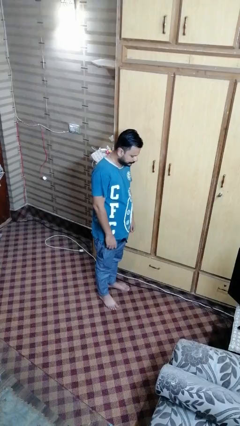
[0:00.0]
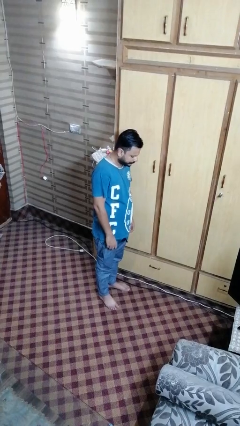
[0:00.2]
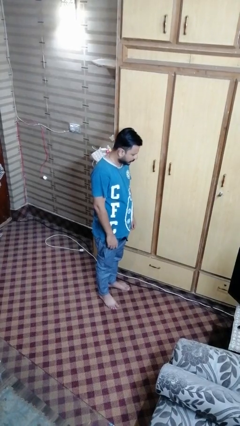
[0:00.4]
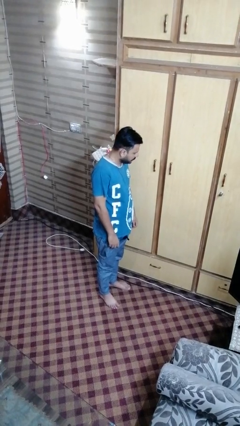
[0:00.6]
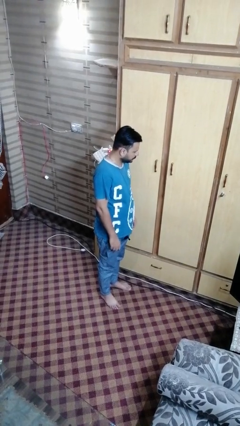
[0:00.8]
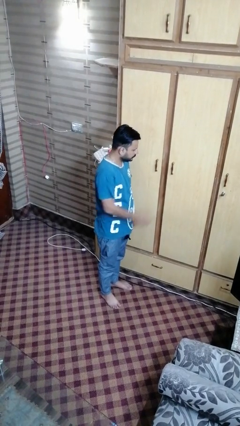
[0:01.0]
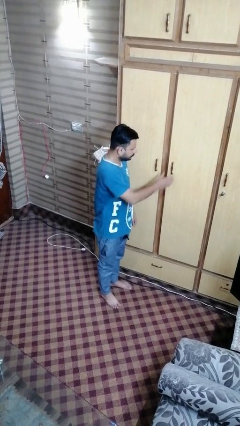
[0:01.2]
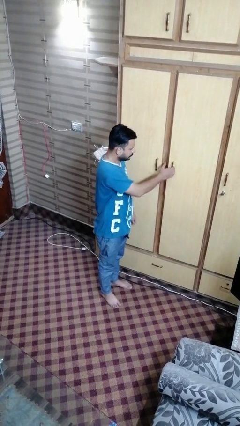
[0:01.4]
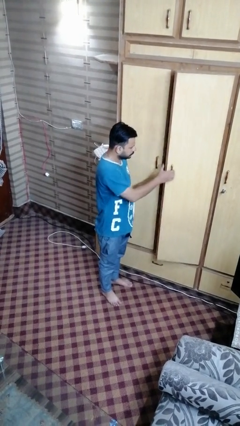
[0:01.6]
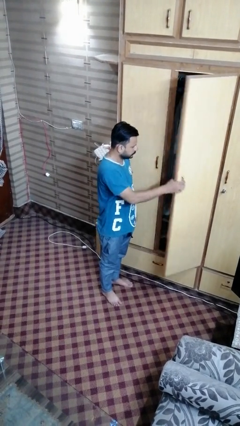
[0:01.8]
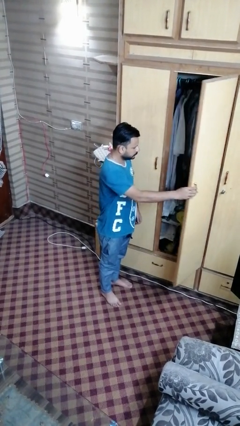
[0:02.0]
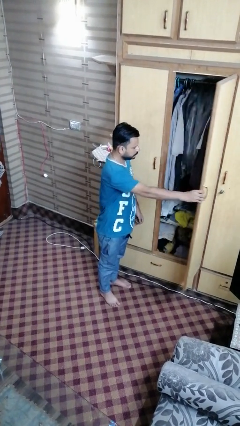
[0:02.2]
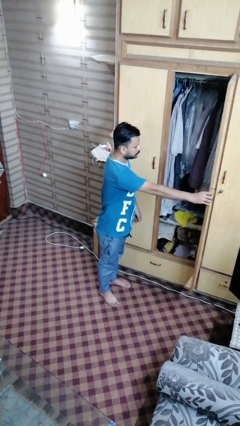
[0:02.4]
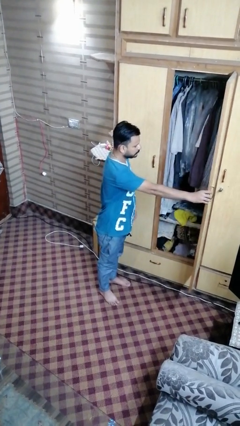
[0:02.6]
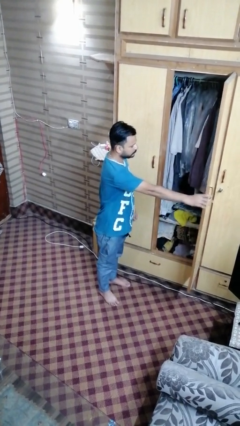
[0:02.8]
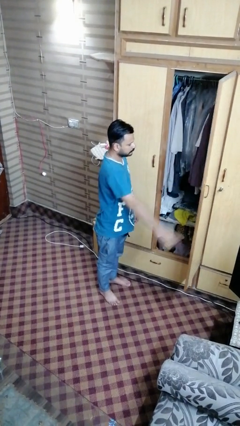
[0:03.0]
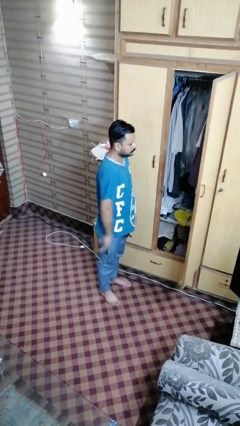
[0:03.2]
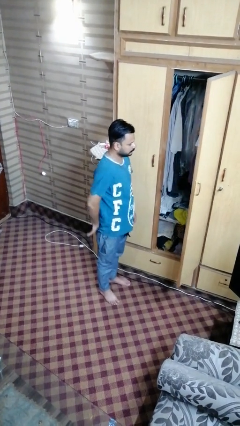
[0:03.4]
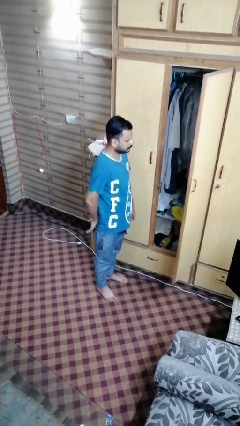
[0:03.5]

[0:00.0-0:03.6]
person opens closet door

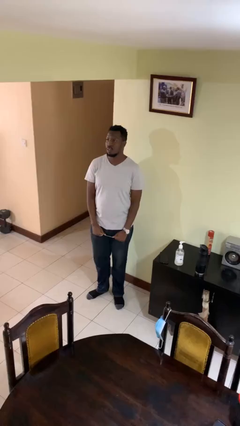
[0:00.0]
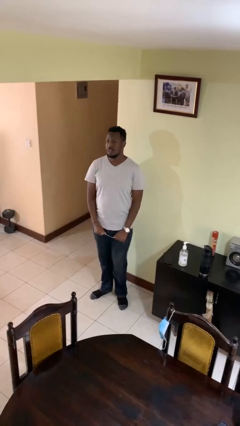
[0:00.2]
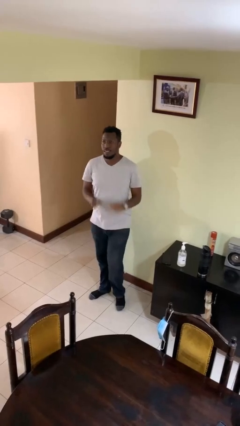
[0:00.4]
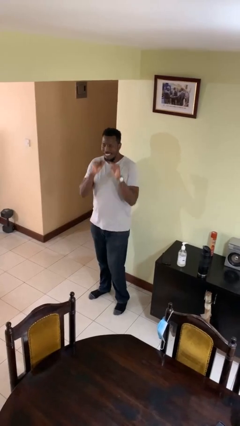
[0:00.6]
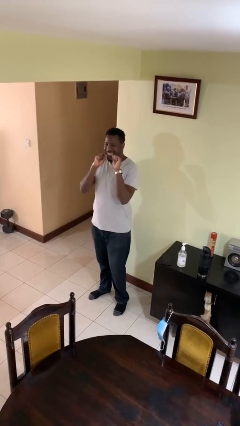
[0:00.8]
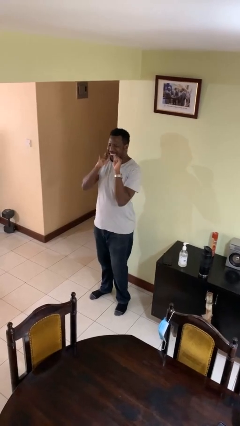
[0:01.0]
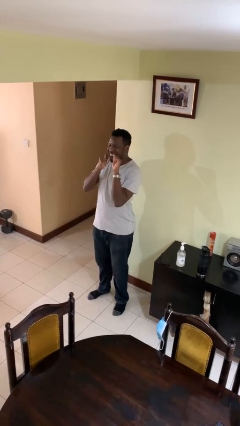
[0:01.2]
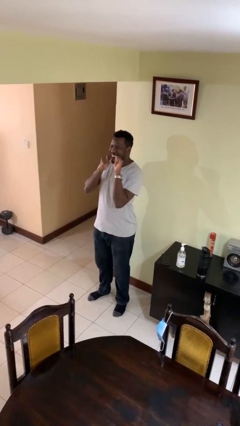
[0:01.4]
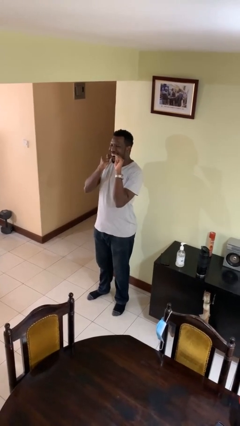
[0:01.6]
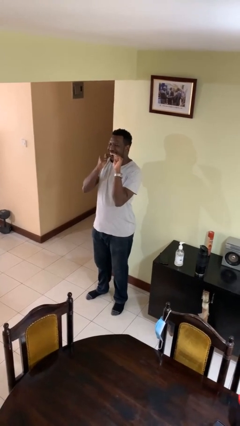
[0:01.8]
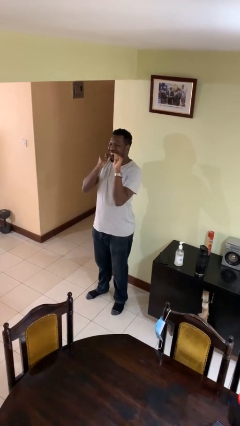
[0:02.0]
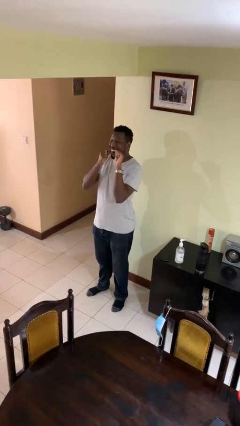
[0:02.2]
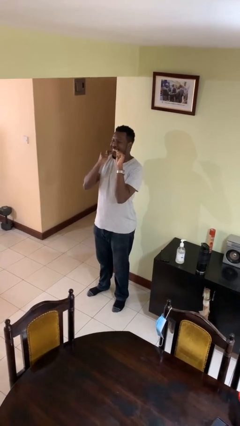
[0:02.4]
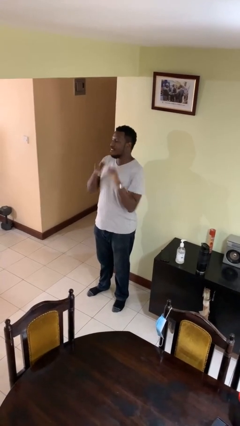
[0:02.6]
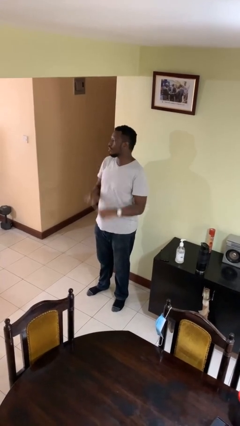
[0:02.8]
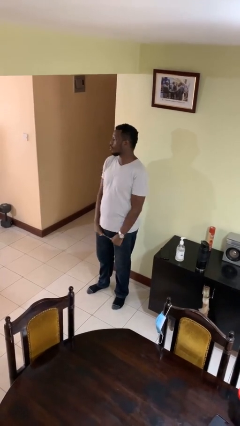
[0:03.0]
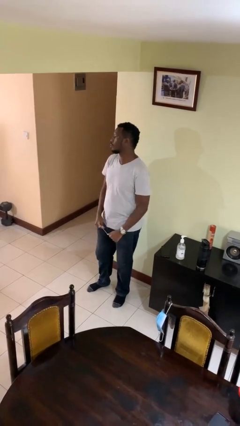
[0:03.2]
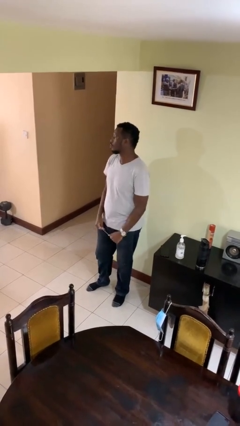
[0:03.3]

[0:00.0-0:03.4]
person flosses

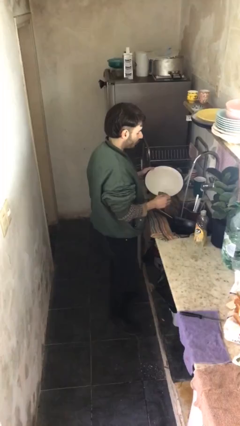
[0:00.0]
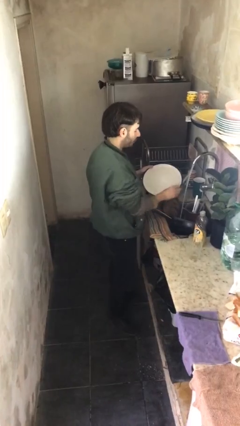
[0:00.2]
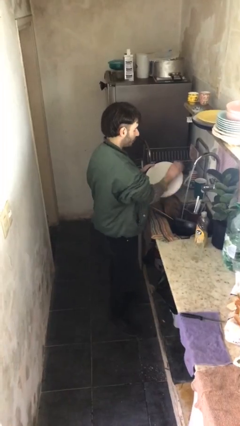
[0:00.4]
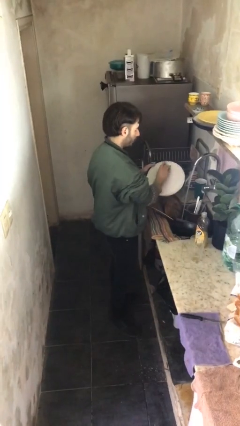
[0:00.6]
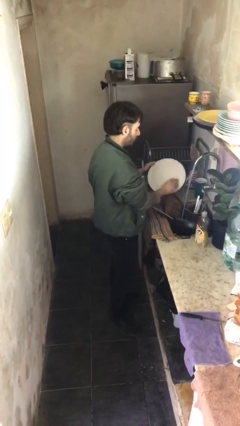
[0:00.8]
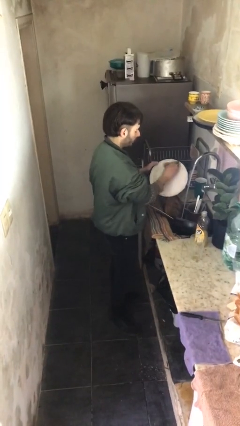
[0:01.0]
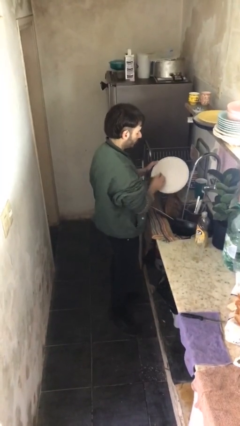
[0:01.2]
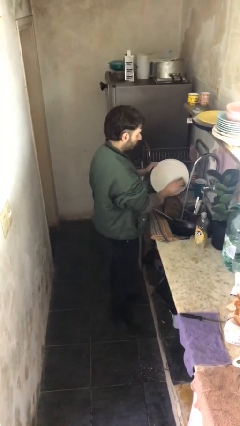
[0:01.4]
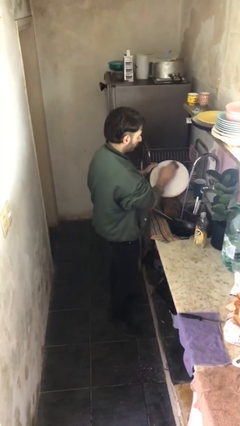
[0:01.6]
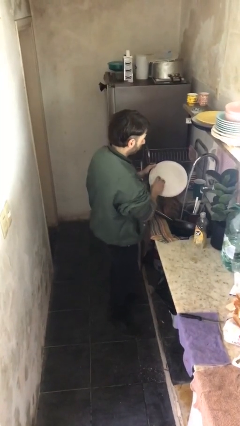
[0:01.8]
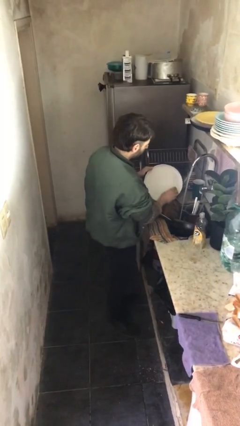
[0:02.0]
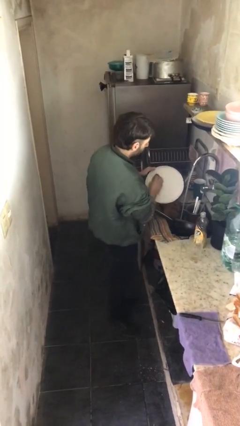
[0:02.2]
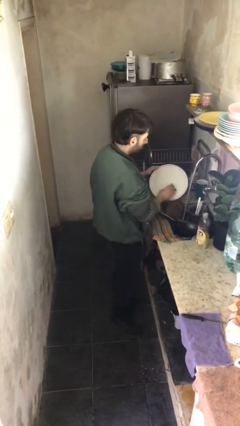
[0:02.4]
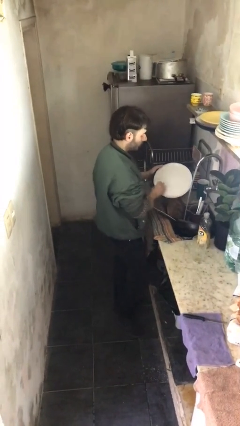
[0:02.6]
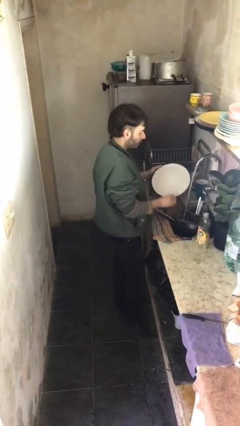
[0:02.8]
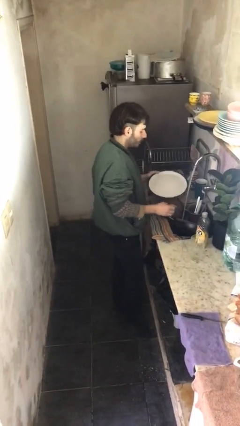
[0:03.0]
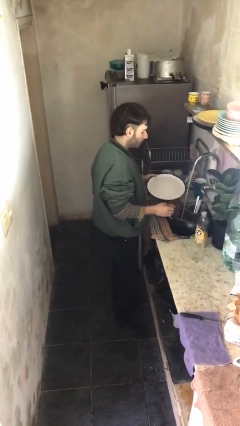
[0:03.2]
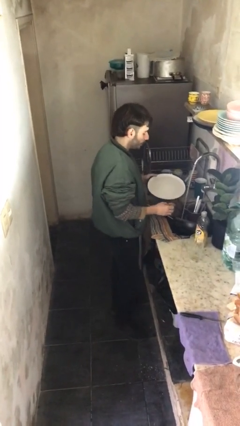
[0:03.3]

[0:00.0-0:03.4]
person washes dish

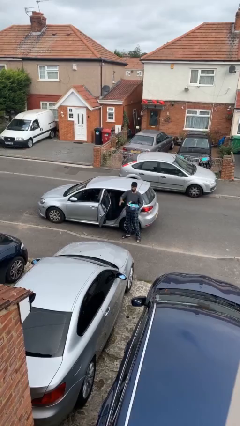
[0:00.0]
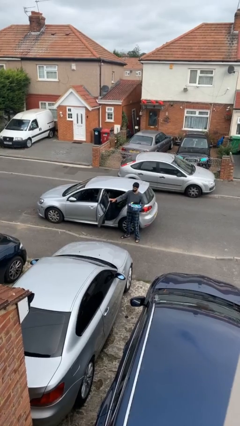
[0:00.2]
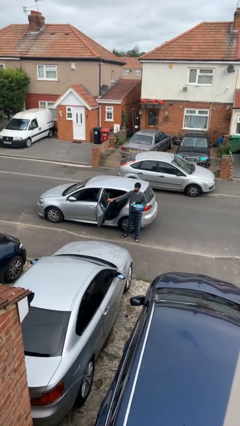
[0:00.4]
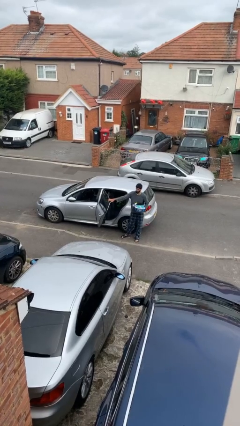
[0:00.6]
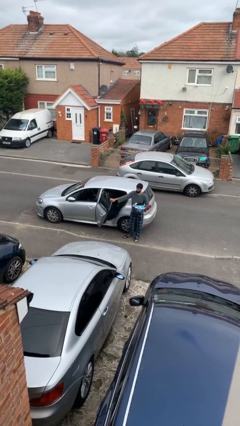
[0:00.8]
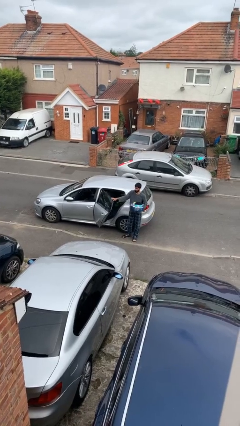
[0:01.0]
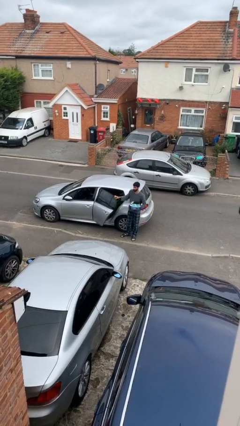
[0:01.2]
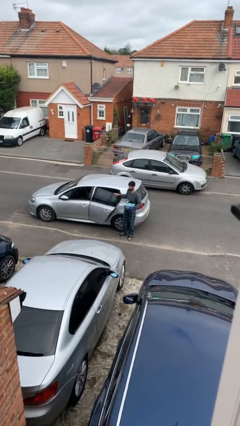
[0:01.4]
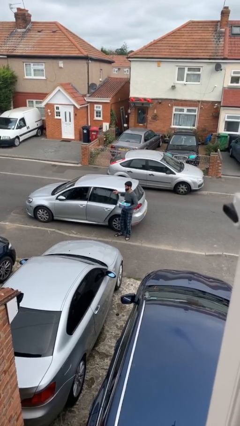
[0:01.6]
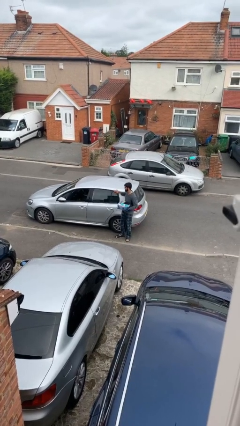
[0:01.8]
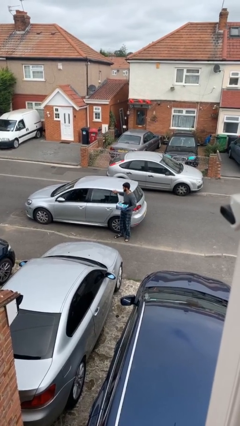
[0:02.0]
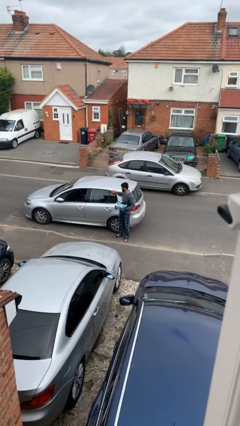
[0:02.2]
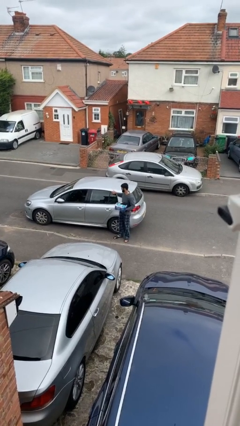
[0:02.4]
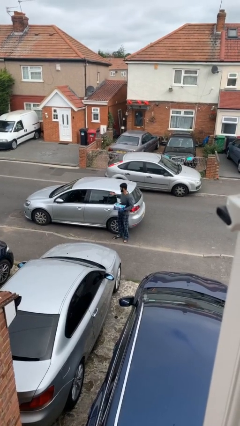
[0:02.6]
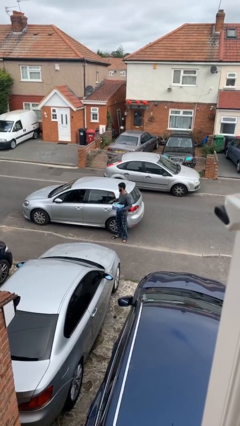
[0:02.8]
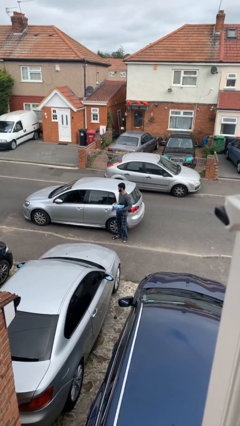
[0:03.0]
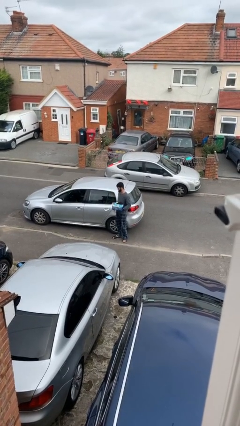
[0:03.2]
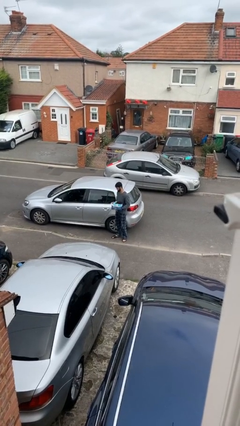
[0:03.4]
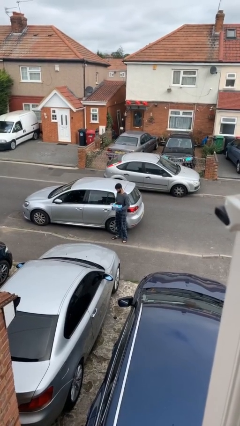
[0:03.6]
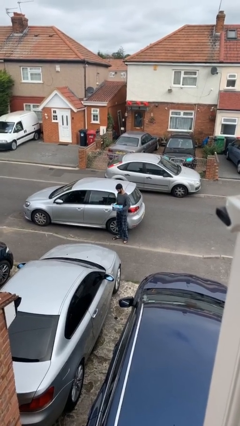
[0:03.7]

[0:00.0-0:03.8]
person closes car door

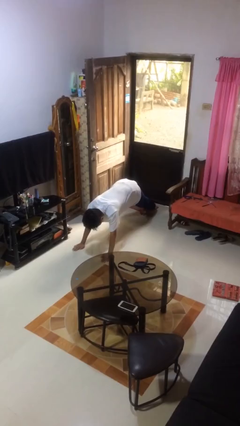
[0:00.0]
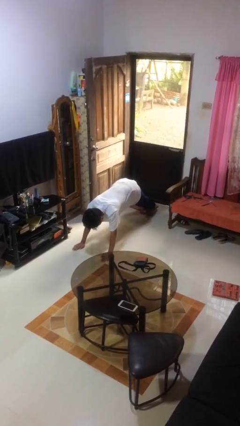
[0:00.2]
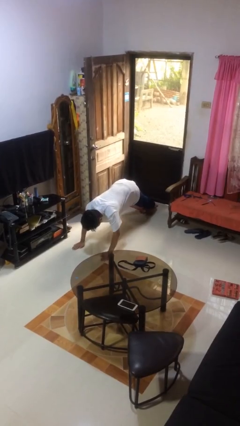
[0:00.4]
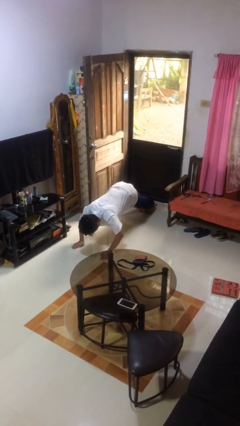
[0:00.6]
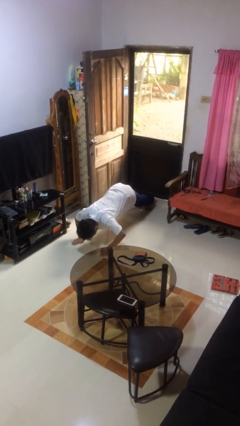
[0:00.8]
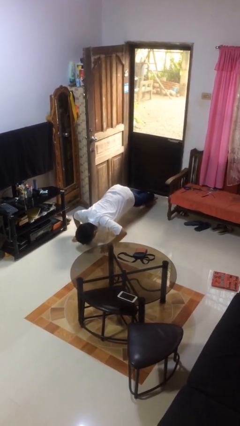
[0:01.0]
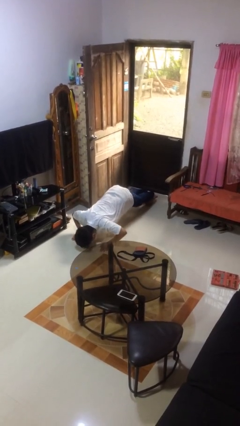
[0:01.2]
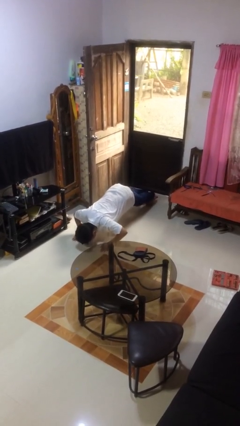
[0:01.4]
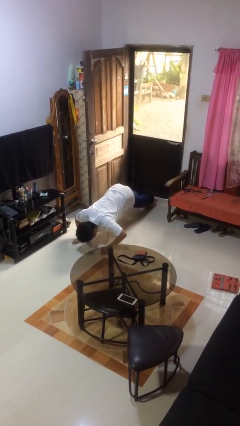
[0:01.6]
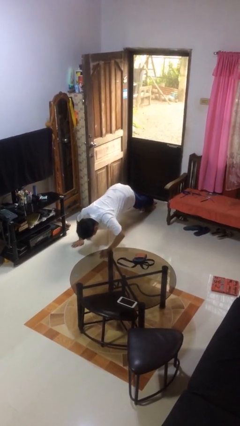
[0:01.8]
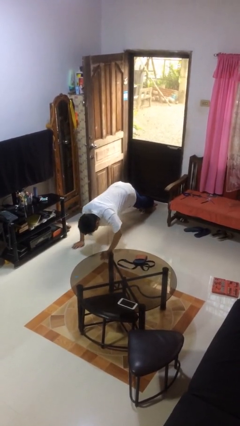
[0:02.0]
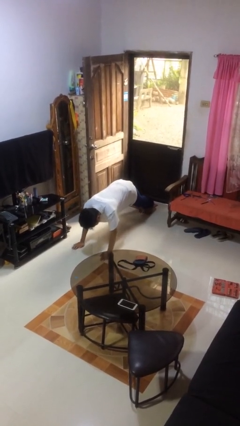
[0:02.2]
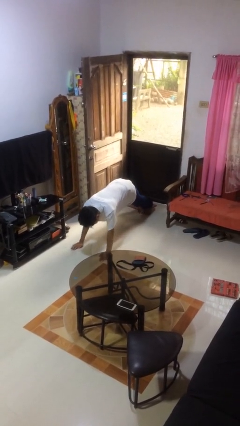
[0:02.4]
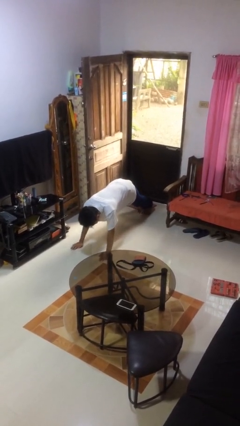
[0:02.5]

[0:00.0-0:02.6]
person exercises with pushup

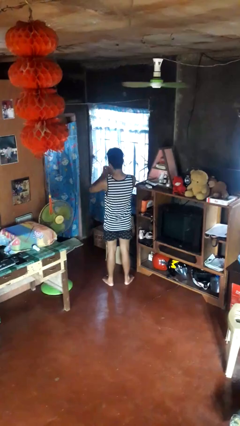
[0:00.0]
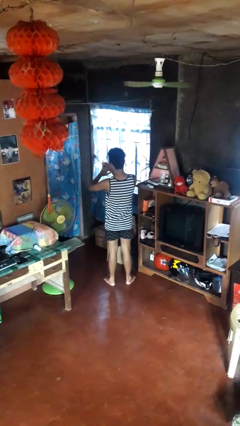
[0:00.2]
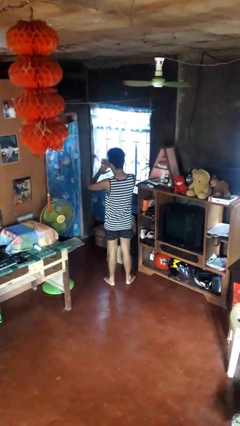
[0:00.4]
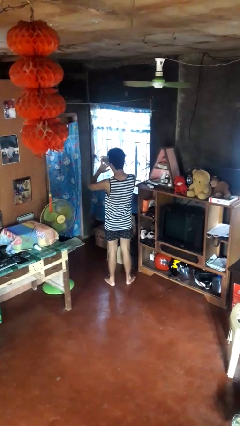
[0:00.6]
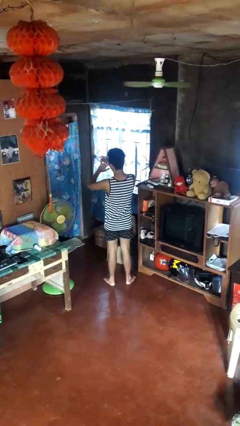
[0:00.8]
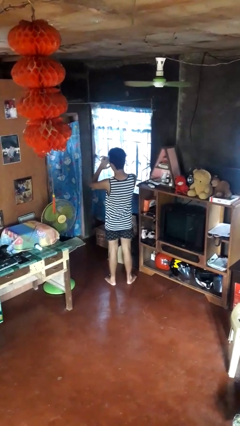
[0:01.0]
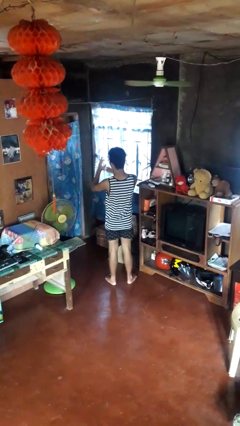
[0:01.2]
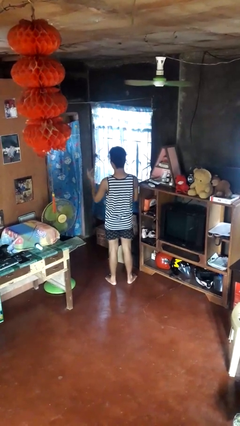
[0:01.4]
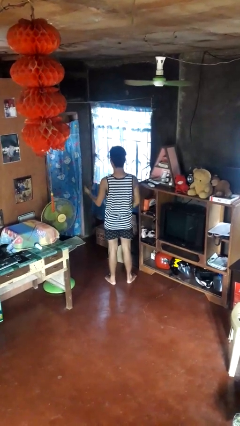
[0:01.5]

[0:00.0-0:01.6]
person puts on ring
